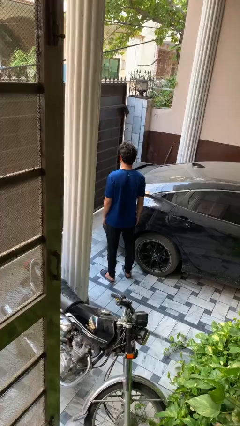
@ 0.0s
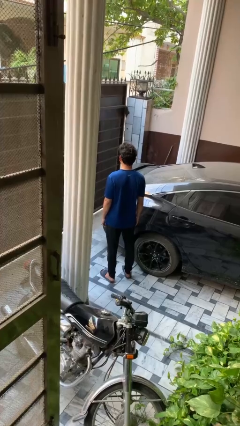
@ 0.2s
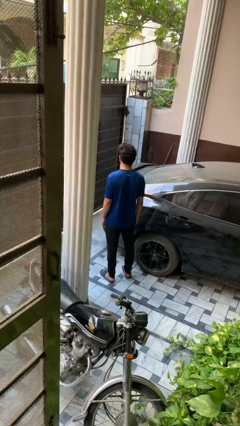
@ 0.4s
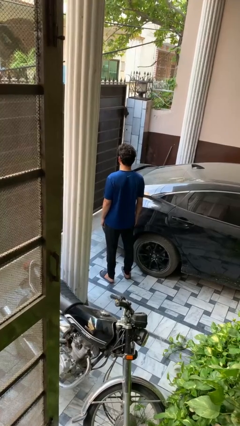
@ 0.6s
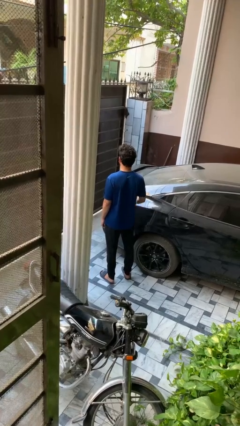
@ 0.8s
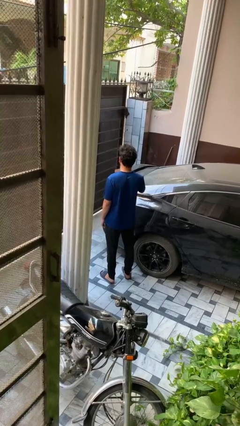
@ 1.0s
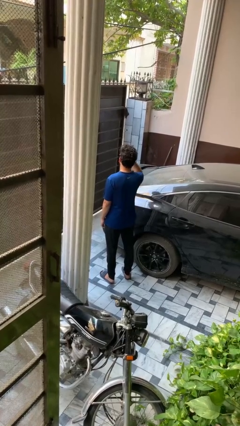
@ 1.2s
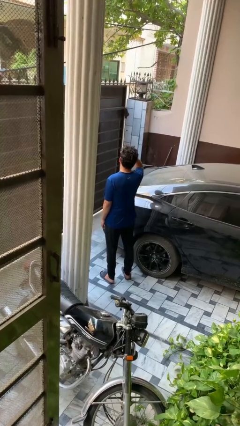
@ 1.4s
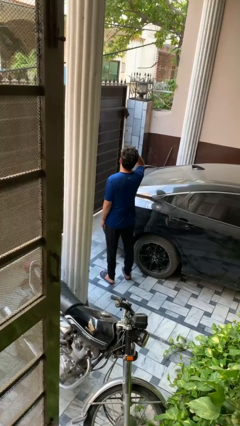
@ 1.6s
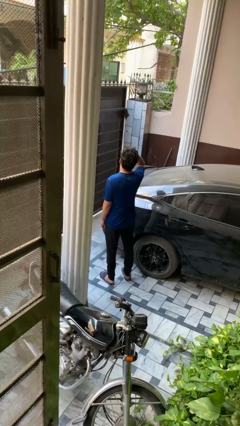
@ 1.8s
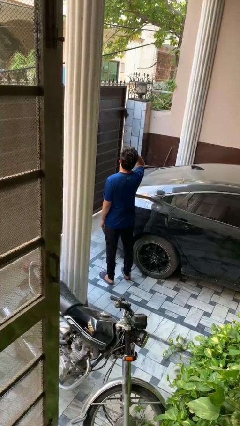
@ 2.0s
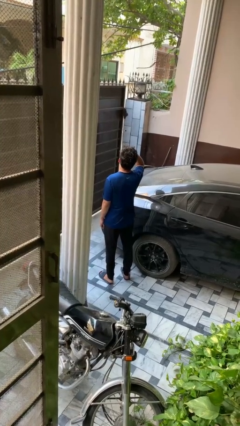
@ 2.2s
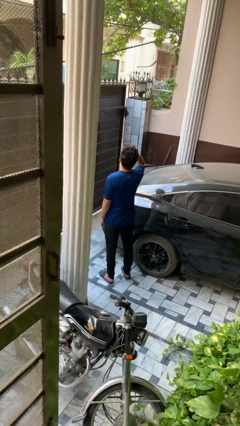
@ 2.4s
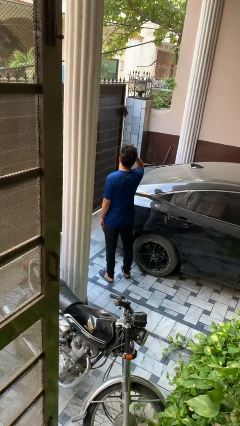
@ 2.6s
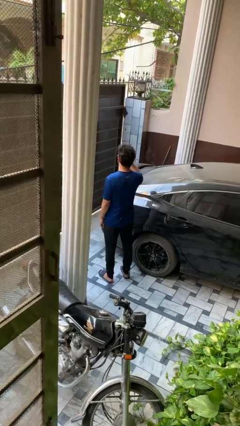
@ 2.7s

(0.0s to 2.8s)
person shades eyes

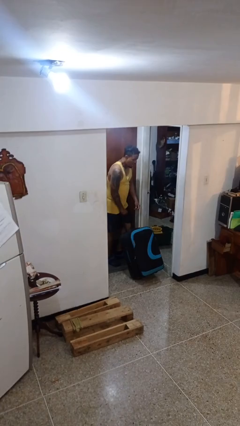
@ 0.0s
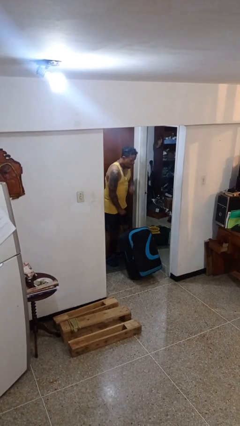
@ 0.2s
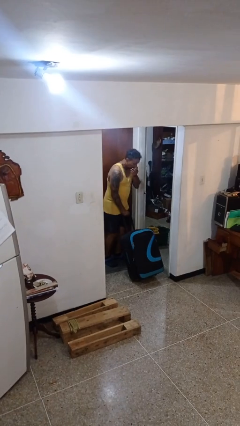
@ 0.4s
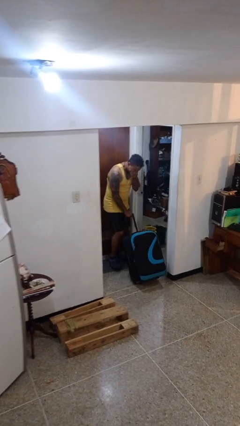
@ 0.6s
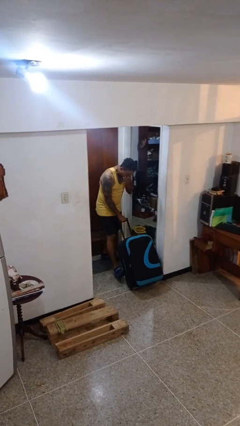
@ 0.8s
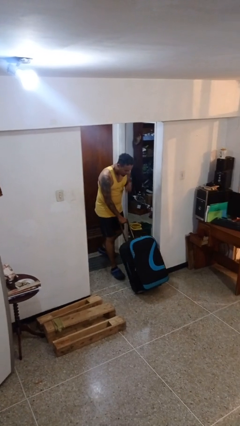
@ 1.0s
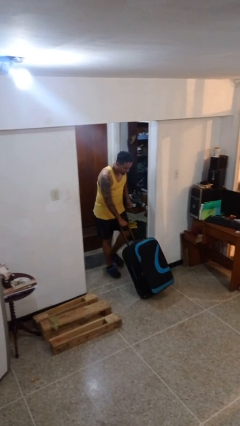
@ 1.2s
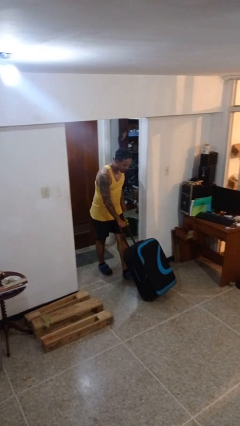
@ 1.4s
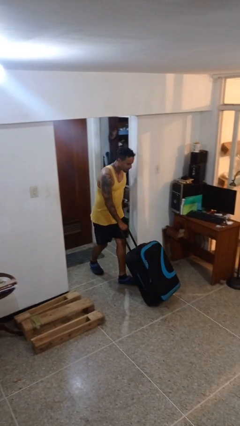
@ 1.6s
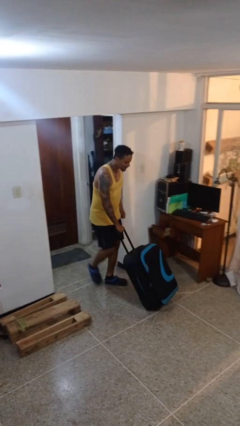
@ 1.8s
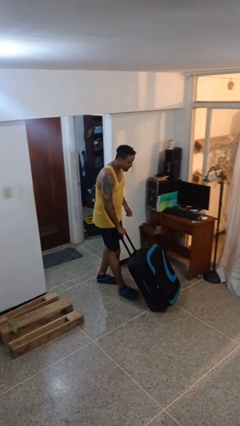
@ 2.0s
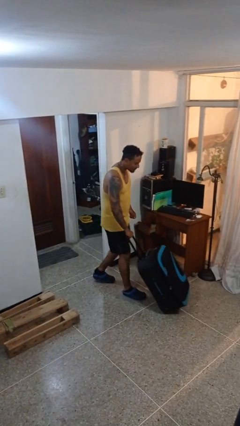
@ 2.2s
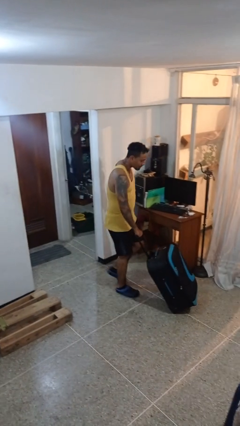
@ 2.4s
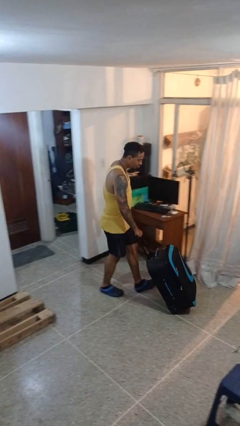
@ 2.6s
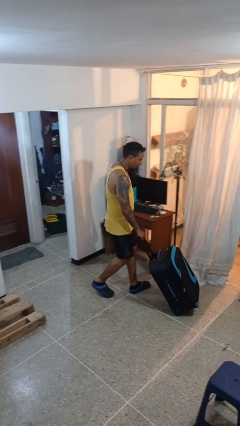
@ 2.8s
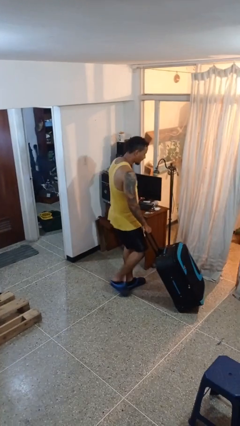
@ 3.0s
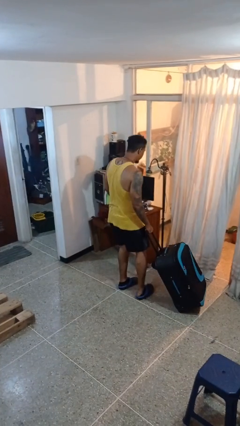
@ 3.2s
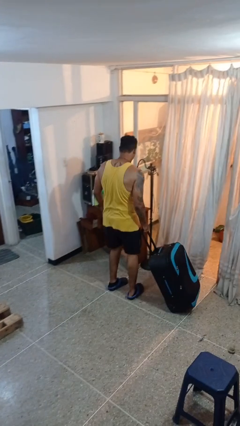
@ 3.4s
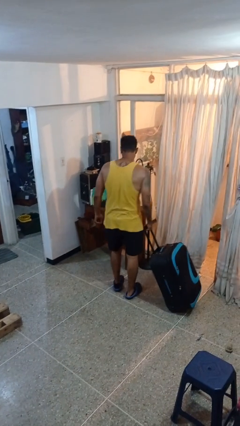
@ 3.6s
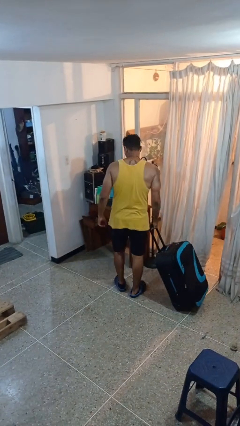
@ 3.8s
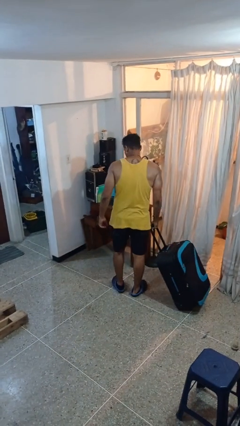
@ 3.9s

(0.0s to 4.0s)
person pushes wheeled cart

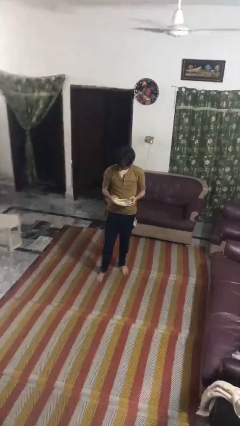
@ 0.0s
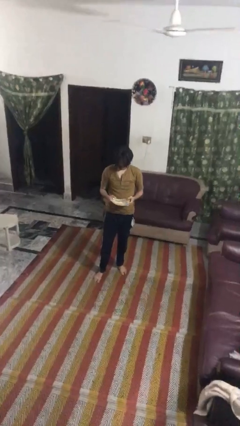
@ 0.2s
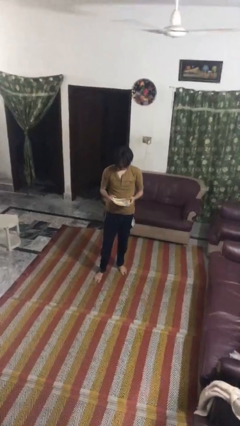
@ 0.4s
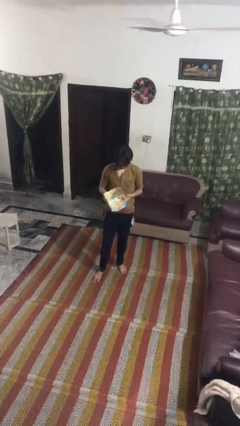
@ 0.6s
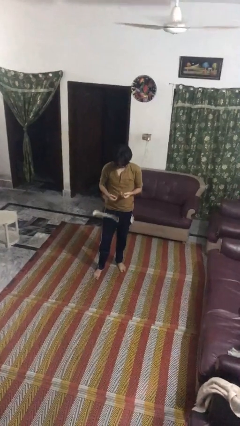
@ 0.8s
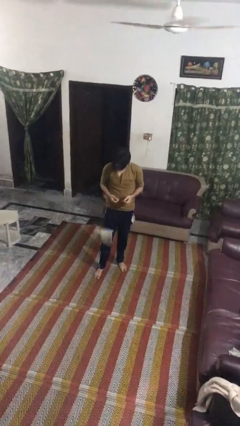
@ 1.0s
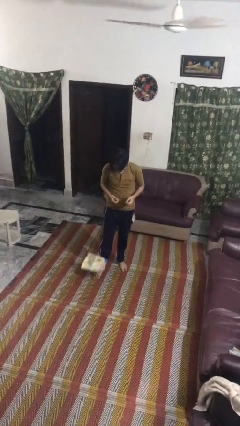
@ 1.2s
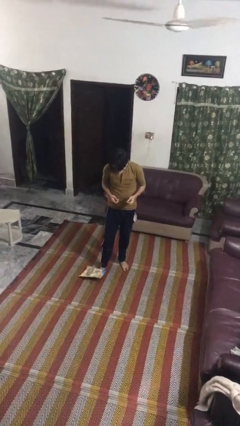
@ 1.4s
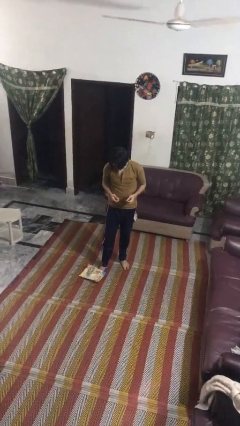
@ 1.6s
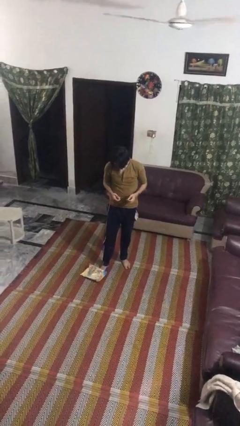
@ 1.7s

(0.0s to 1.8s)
person drops object

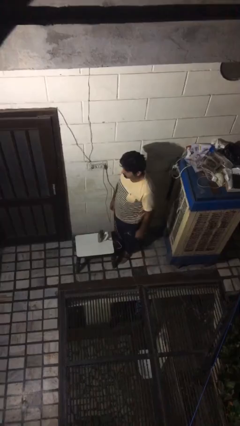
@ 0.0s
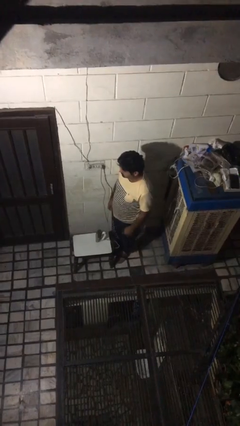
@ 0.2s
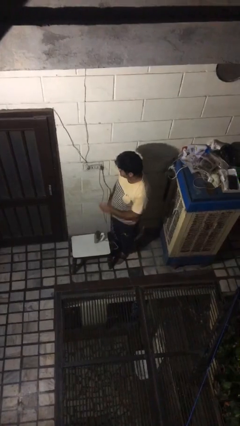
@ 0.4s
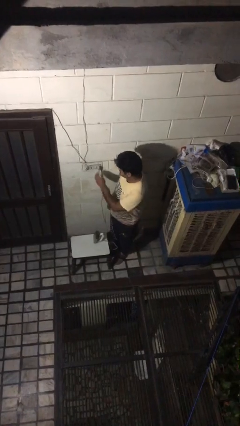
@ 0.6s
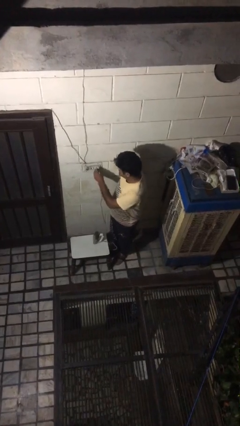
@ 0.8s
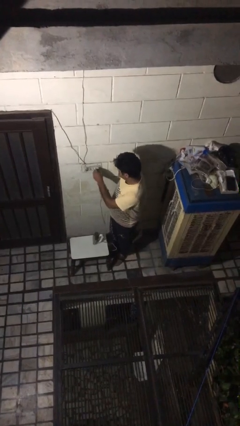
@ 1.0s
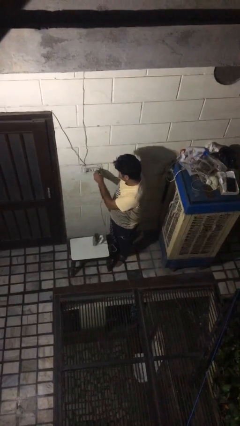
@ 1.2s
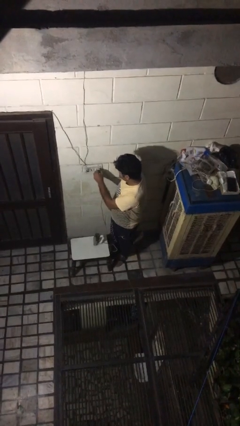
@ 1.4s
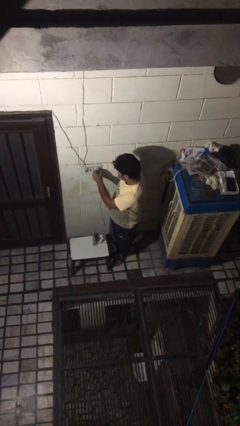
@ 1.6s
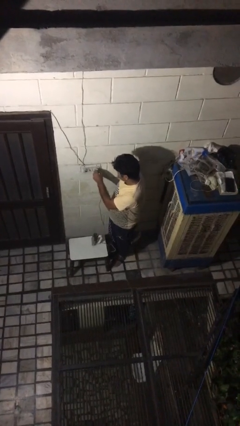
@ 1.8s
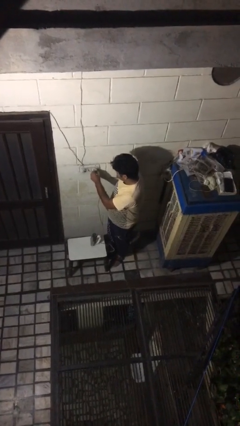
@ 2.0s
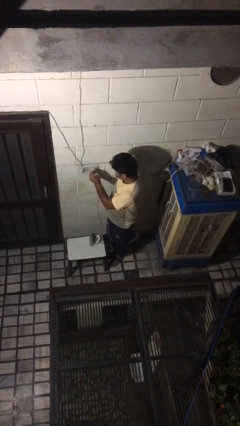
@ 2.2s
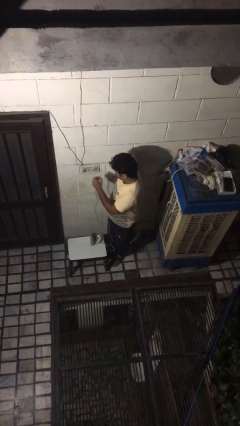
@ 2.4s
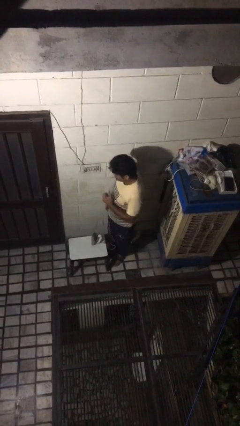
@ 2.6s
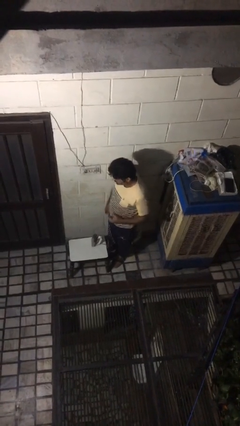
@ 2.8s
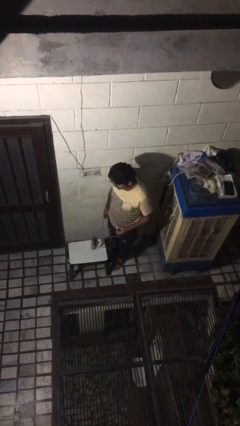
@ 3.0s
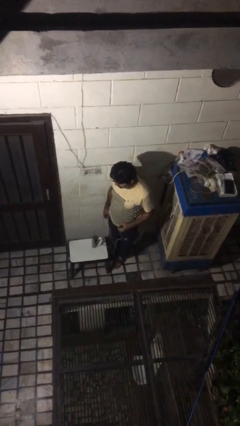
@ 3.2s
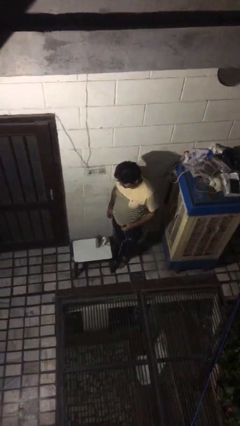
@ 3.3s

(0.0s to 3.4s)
person unplugs from electrical socket

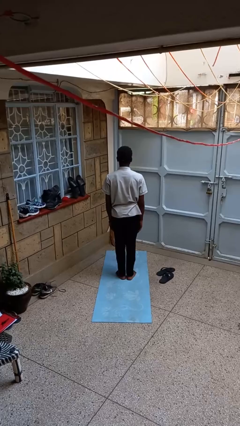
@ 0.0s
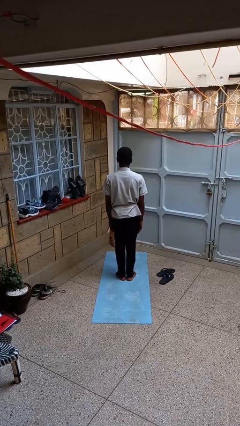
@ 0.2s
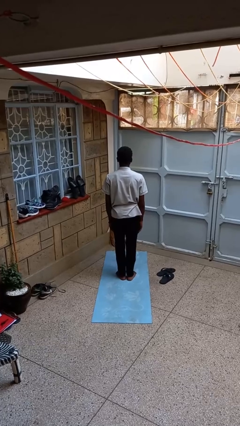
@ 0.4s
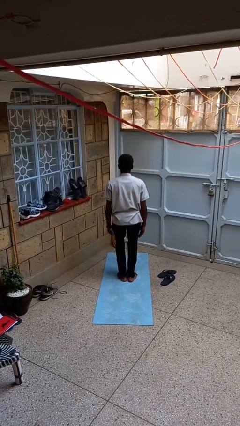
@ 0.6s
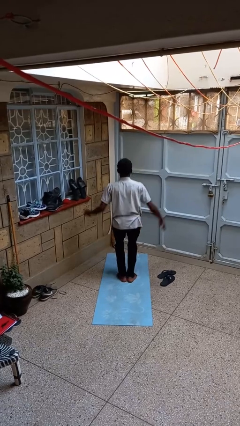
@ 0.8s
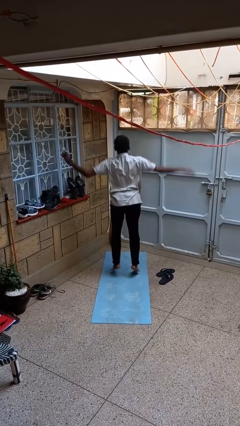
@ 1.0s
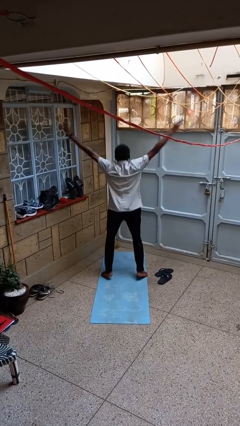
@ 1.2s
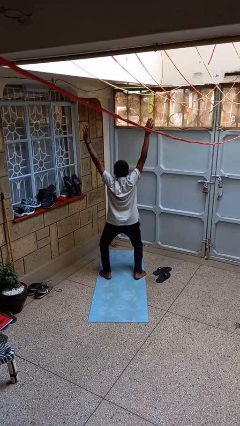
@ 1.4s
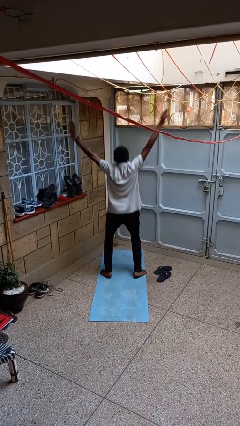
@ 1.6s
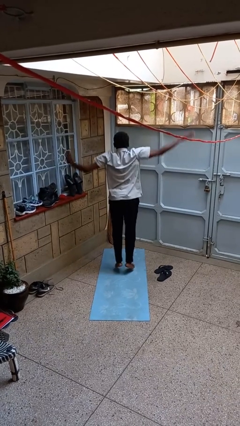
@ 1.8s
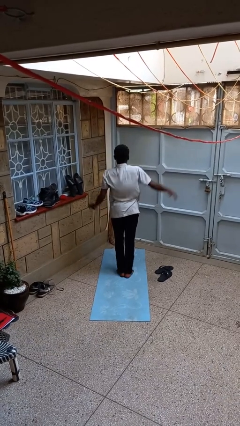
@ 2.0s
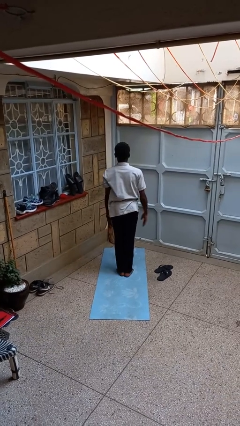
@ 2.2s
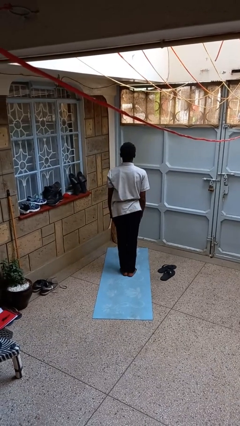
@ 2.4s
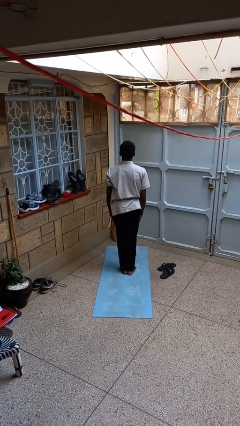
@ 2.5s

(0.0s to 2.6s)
person exercises with jumping jacks

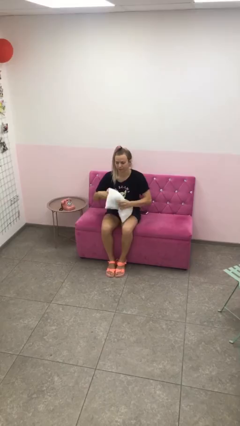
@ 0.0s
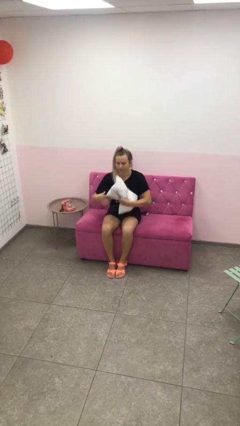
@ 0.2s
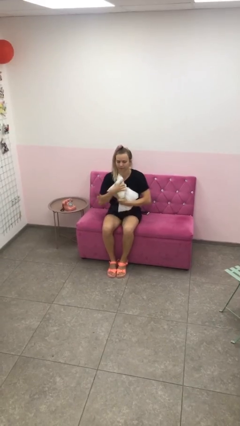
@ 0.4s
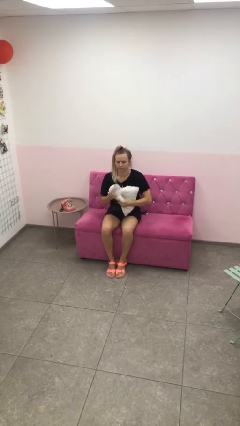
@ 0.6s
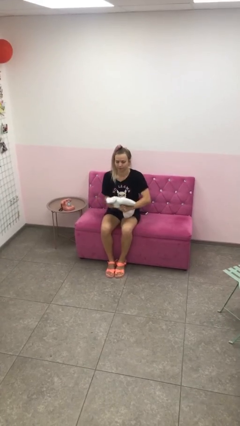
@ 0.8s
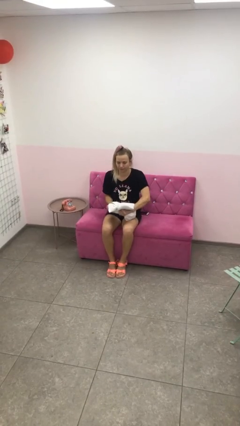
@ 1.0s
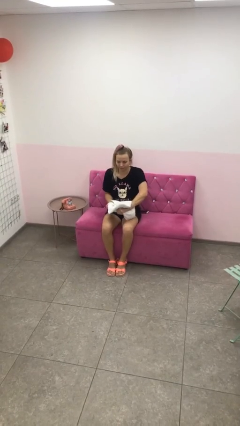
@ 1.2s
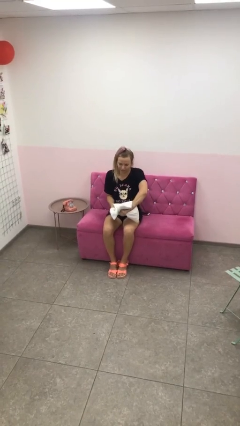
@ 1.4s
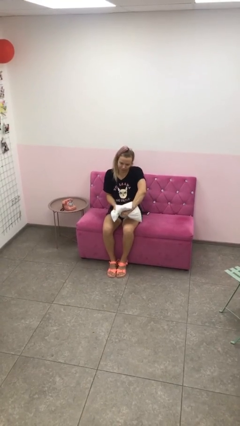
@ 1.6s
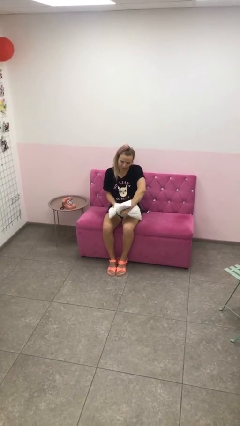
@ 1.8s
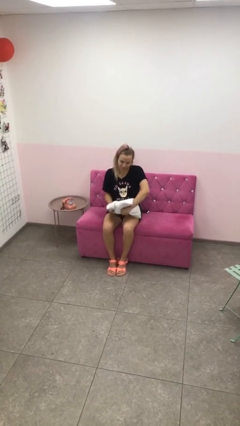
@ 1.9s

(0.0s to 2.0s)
person squeezes object

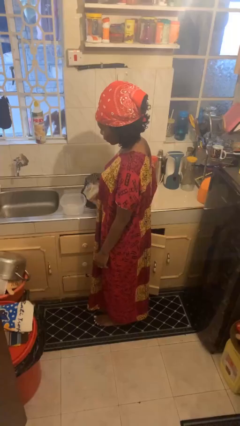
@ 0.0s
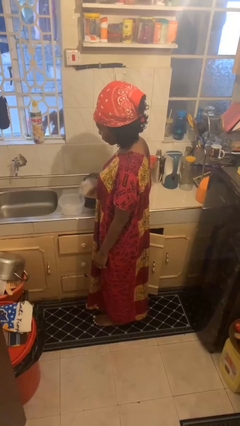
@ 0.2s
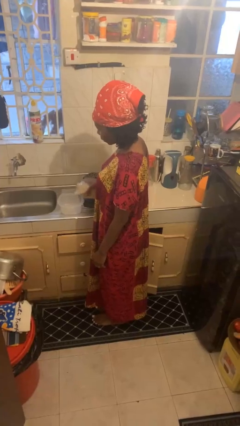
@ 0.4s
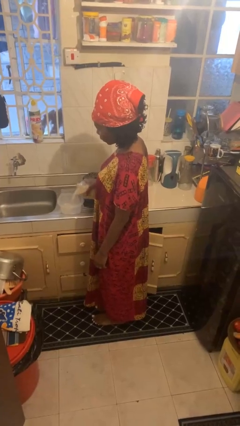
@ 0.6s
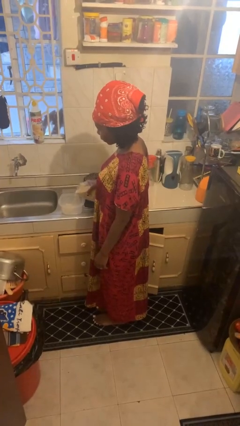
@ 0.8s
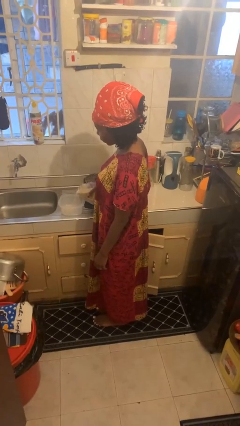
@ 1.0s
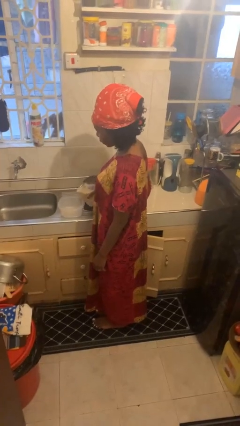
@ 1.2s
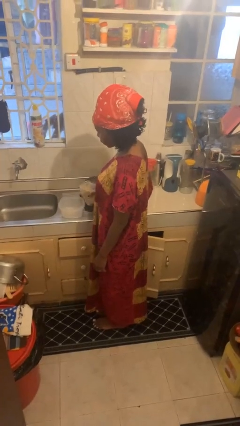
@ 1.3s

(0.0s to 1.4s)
person pours into bowl
